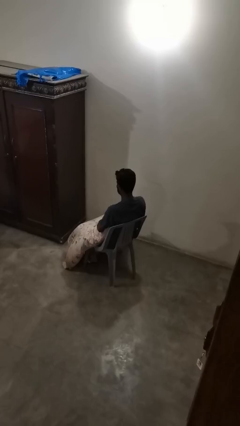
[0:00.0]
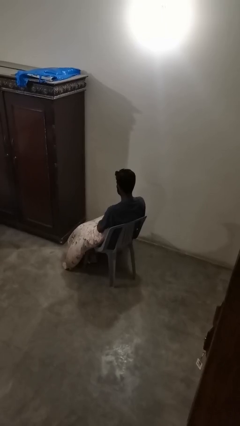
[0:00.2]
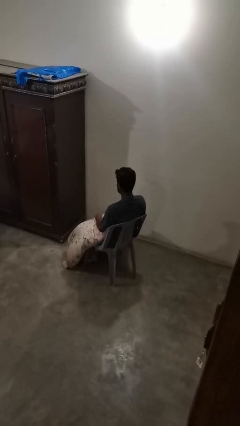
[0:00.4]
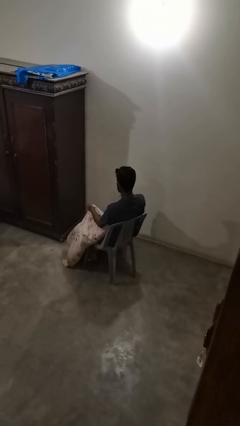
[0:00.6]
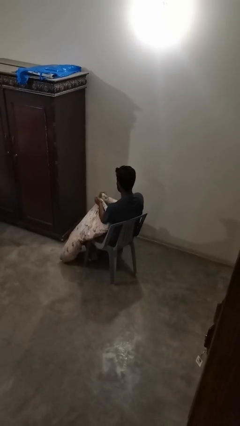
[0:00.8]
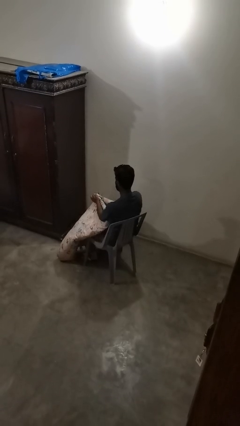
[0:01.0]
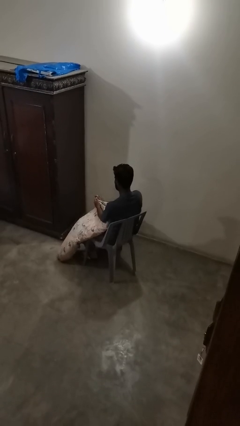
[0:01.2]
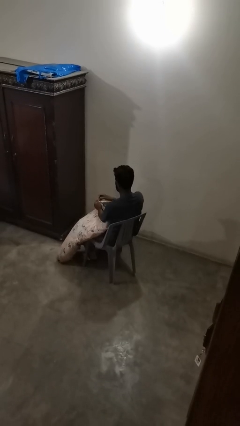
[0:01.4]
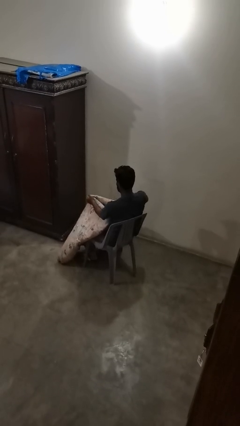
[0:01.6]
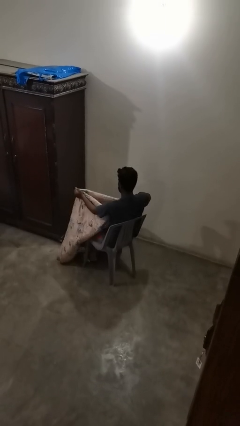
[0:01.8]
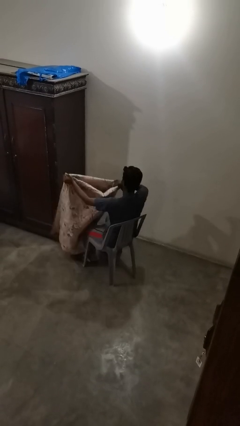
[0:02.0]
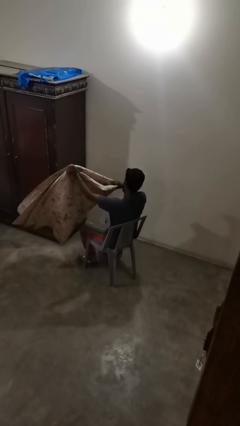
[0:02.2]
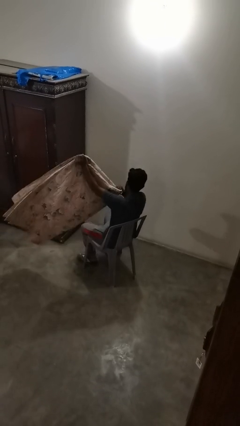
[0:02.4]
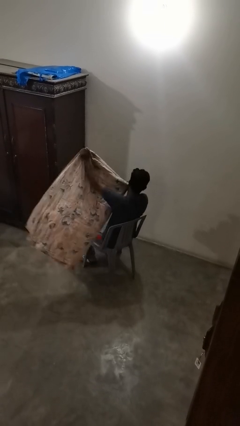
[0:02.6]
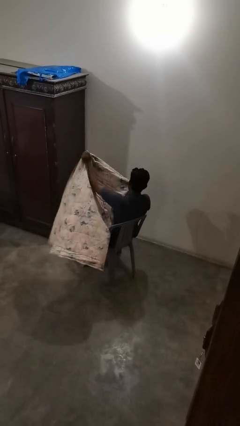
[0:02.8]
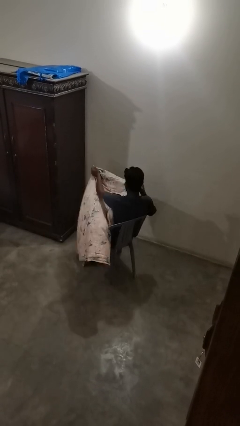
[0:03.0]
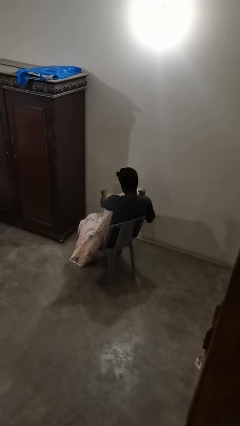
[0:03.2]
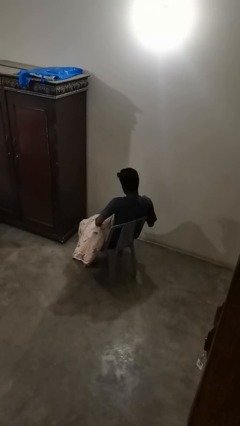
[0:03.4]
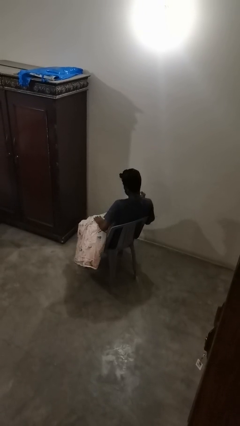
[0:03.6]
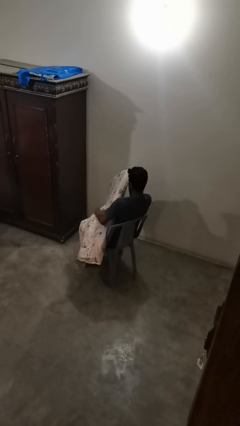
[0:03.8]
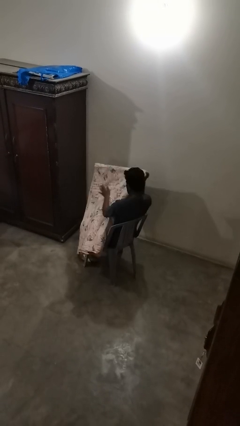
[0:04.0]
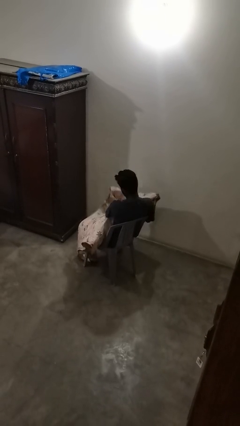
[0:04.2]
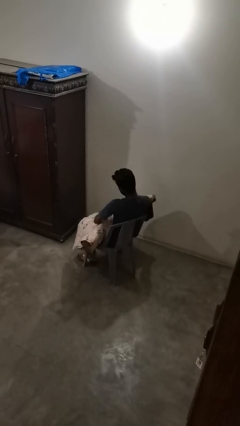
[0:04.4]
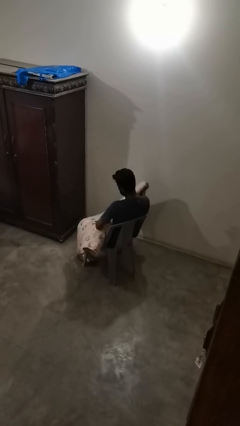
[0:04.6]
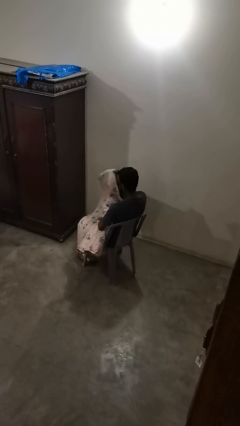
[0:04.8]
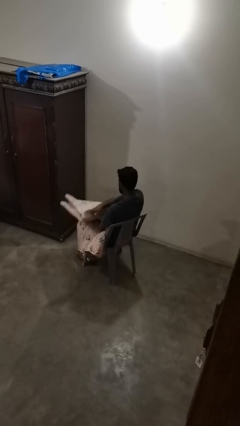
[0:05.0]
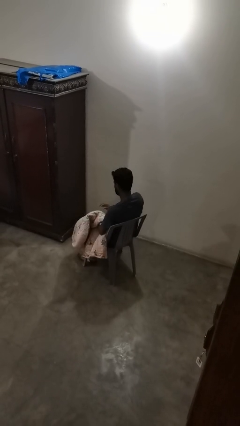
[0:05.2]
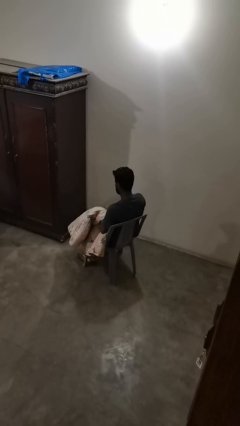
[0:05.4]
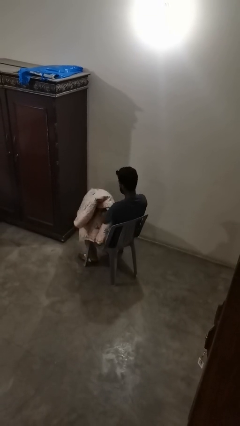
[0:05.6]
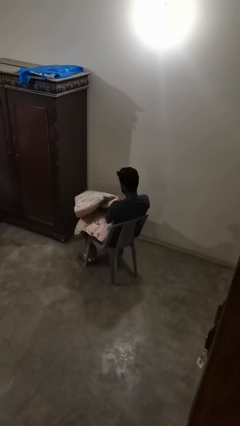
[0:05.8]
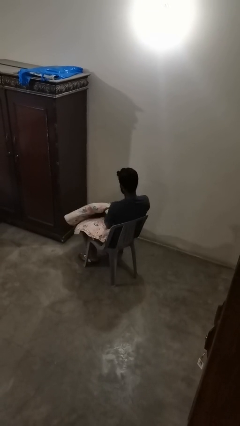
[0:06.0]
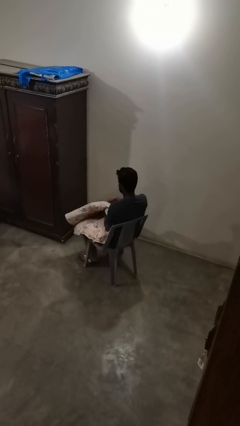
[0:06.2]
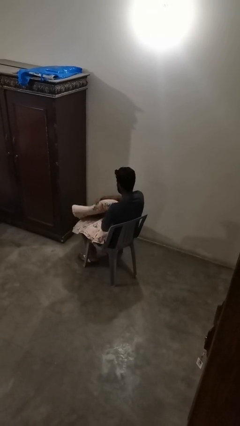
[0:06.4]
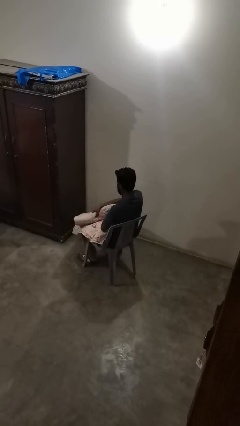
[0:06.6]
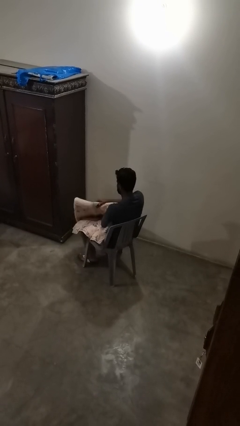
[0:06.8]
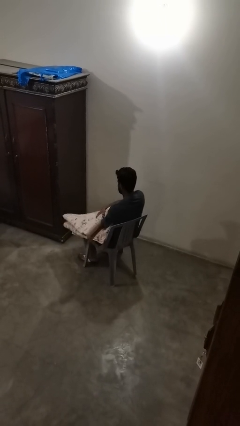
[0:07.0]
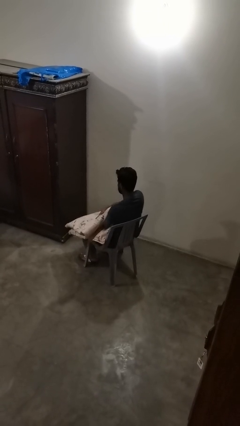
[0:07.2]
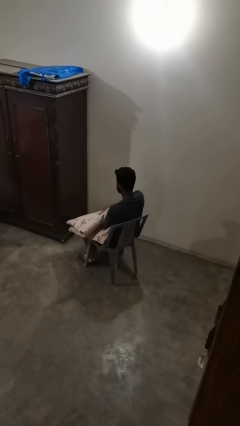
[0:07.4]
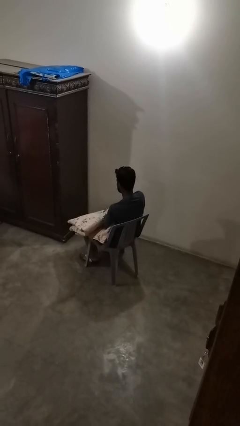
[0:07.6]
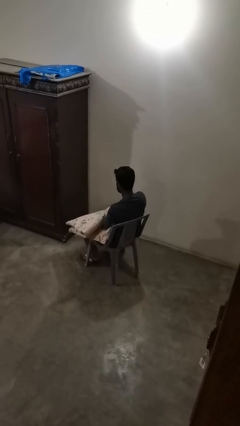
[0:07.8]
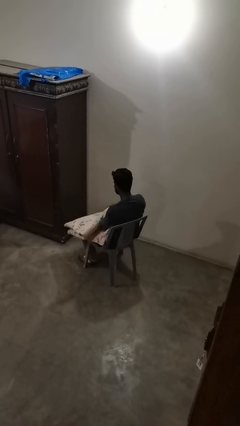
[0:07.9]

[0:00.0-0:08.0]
person folds blanket

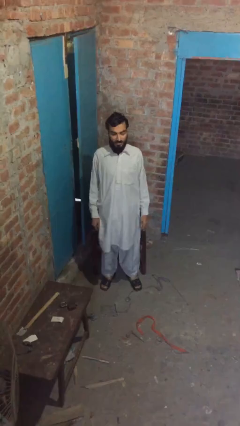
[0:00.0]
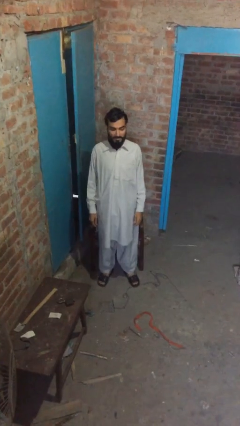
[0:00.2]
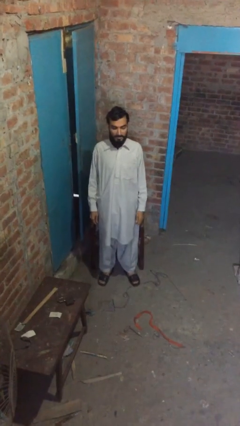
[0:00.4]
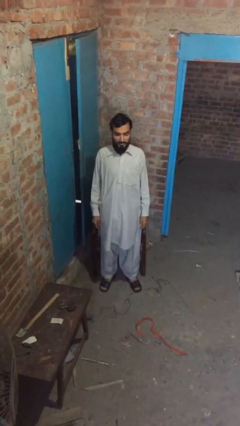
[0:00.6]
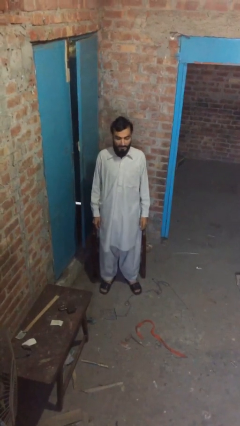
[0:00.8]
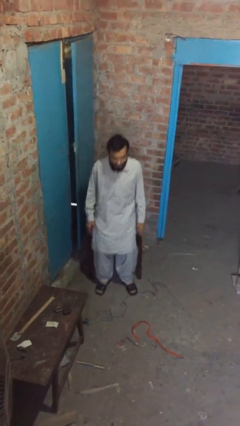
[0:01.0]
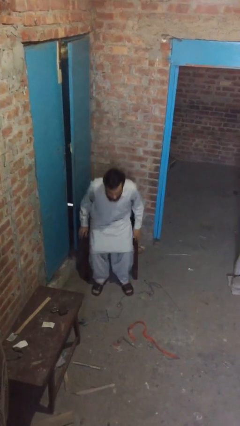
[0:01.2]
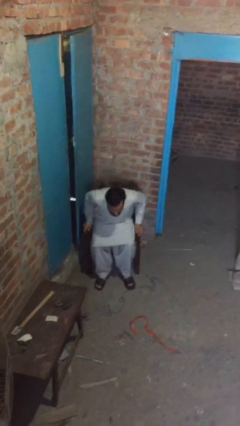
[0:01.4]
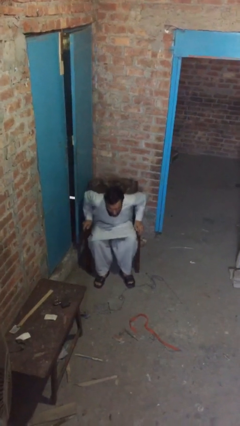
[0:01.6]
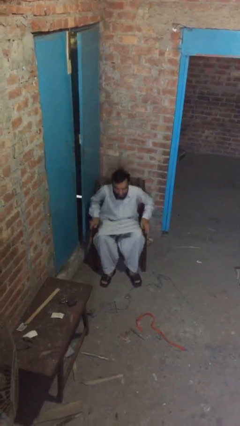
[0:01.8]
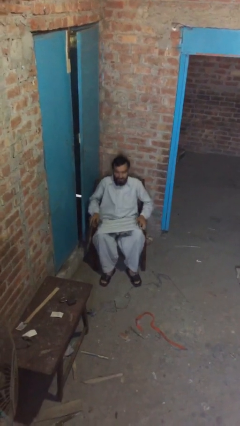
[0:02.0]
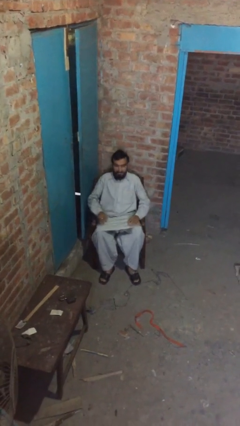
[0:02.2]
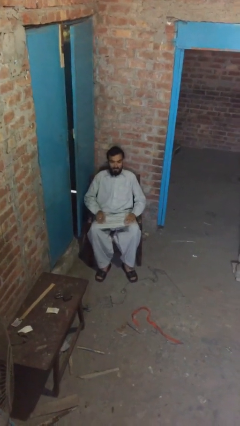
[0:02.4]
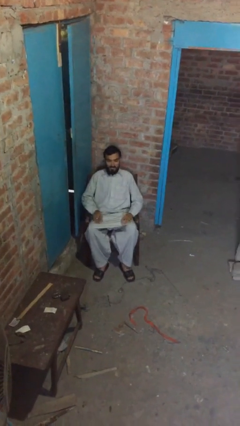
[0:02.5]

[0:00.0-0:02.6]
person sits down

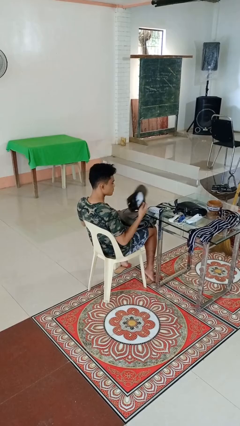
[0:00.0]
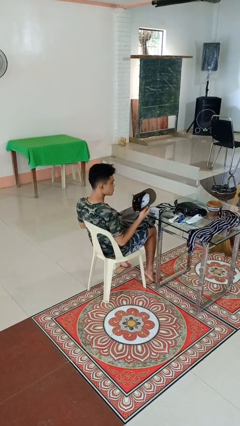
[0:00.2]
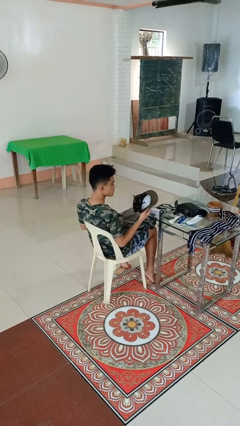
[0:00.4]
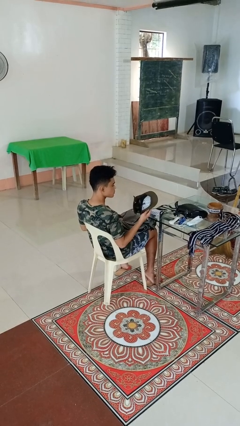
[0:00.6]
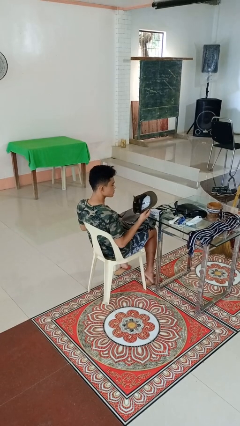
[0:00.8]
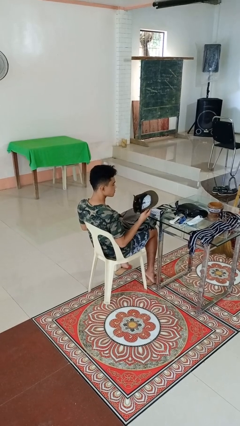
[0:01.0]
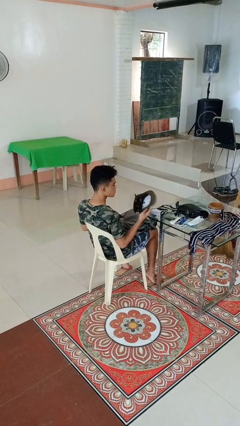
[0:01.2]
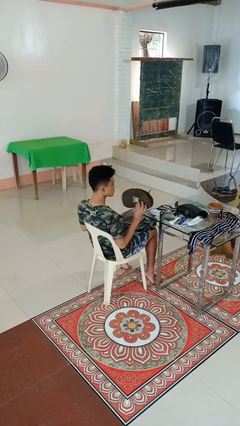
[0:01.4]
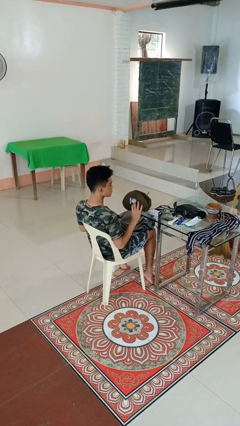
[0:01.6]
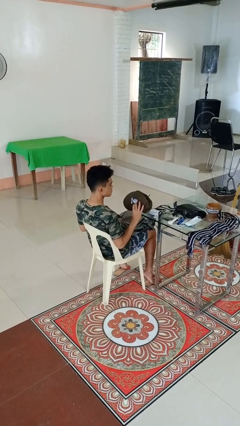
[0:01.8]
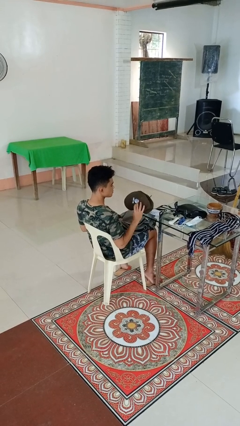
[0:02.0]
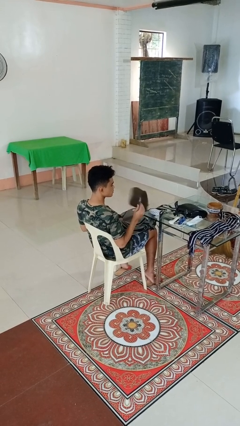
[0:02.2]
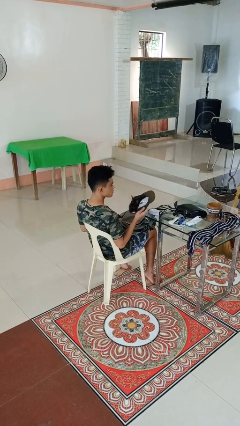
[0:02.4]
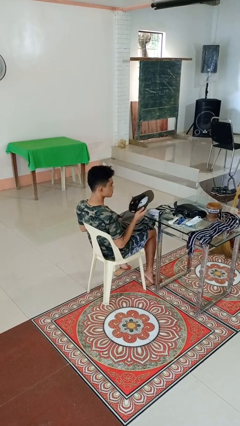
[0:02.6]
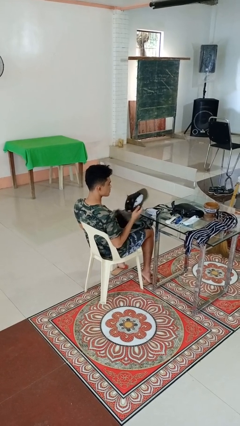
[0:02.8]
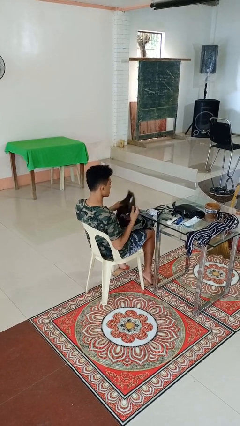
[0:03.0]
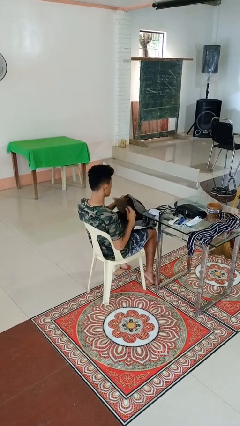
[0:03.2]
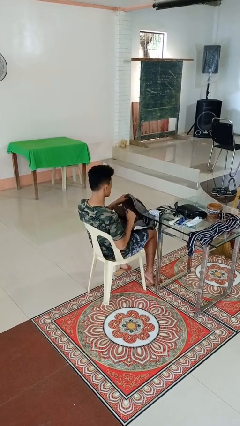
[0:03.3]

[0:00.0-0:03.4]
person takes object from backpack

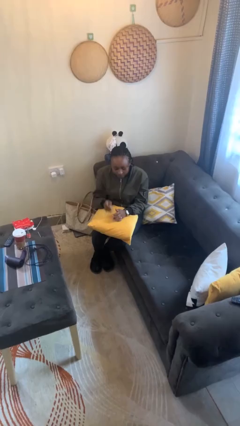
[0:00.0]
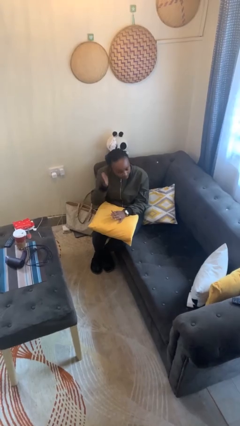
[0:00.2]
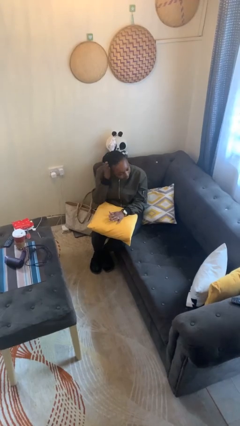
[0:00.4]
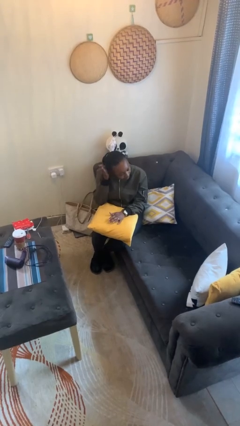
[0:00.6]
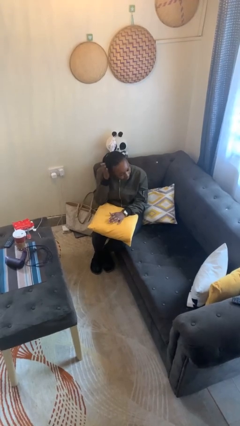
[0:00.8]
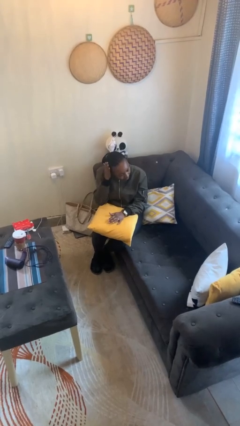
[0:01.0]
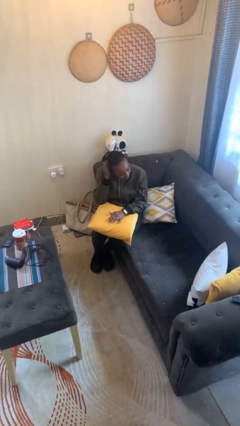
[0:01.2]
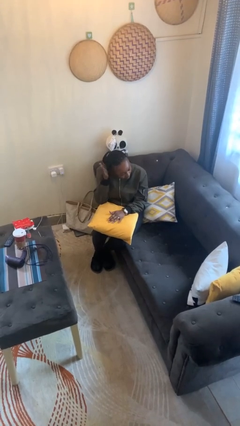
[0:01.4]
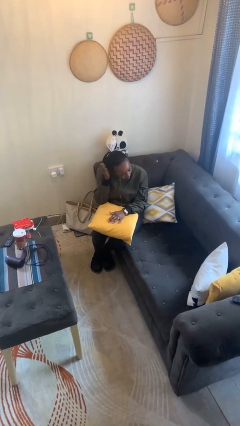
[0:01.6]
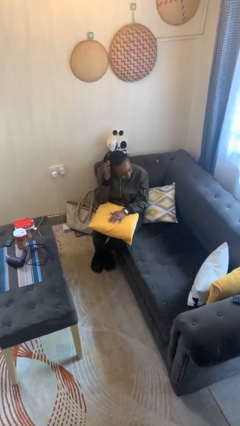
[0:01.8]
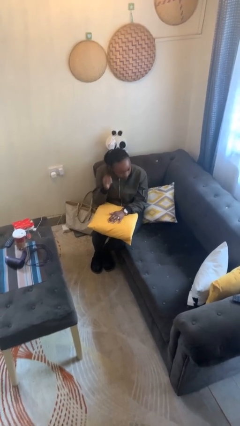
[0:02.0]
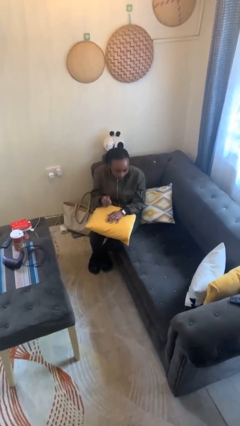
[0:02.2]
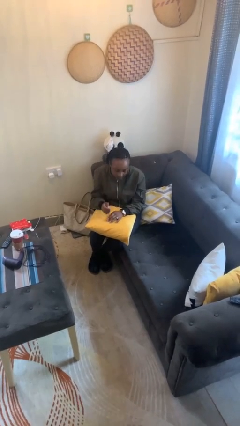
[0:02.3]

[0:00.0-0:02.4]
person pats head

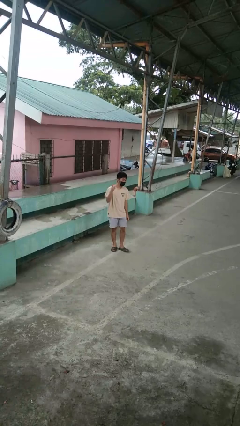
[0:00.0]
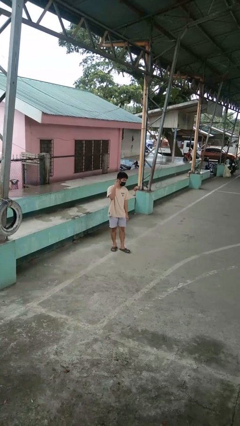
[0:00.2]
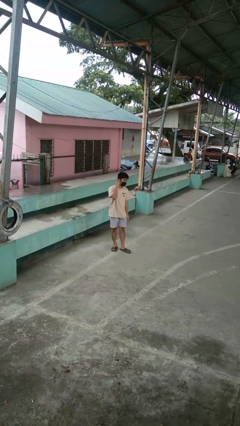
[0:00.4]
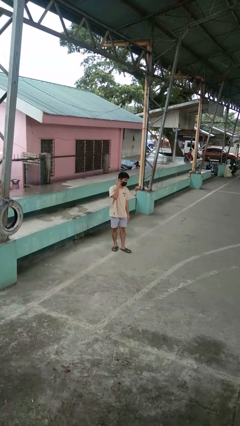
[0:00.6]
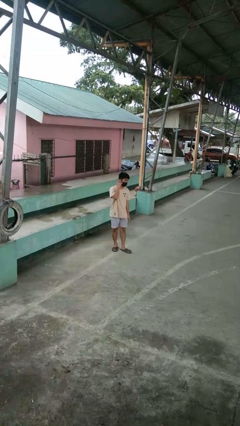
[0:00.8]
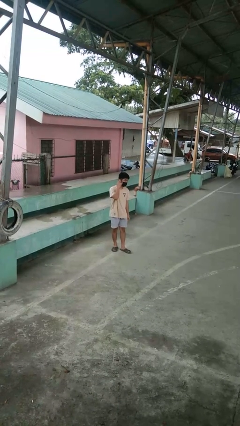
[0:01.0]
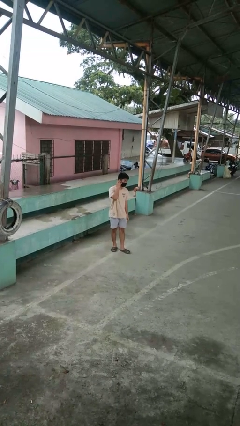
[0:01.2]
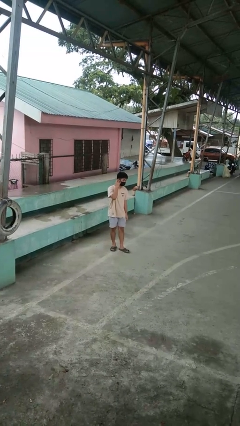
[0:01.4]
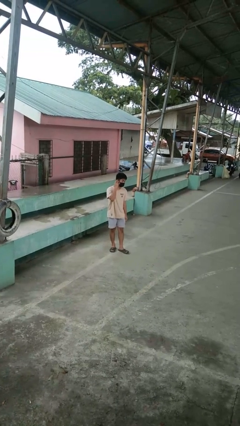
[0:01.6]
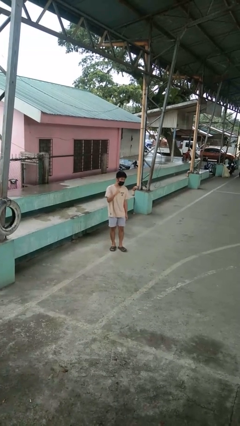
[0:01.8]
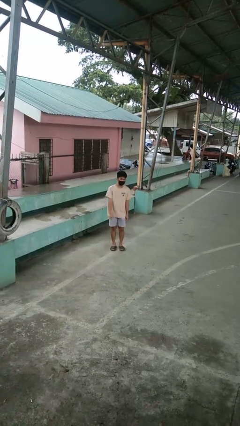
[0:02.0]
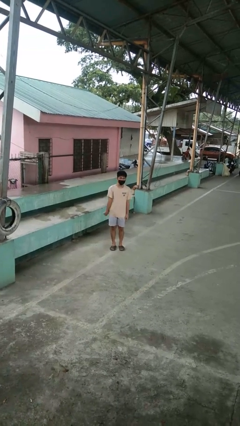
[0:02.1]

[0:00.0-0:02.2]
person gestures listen closely
